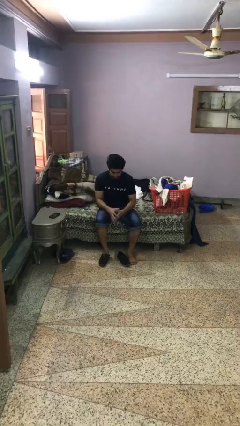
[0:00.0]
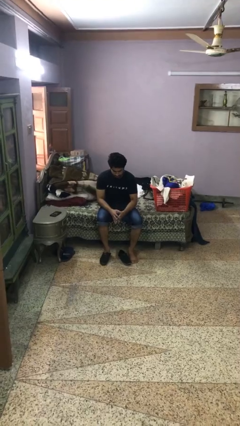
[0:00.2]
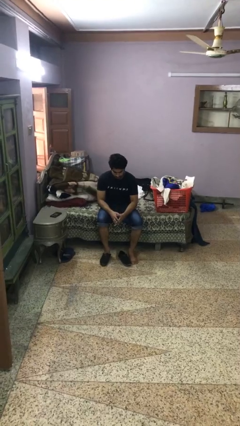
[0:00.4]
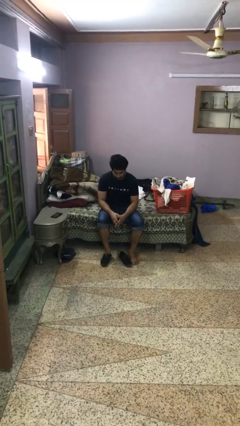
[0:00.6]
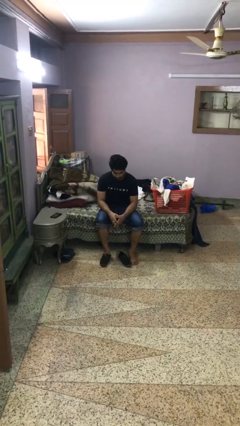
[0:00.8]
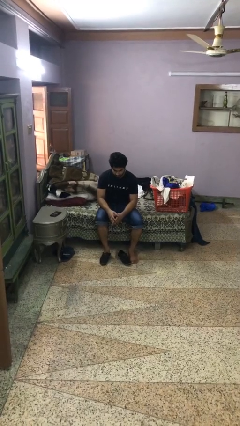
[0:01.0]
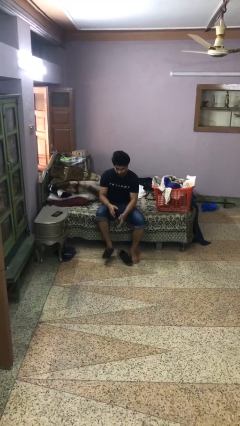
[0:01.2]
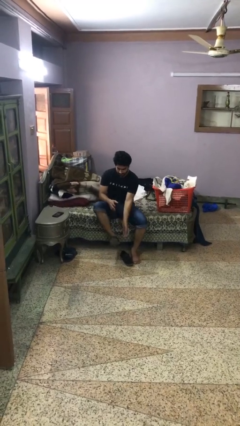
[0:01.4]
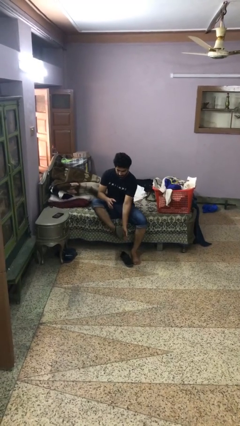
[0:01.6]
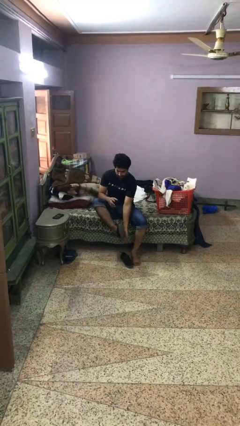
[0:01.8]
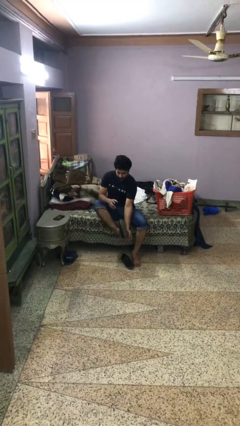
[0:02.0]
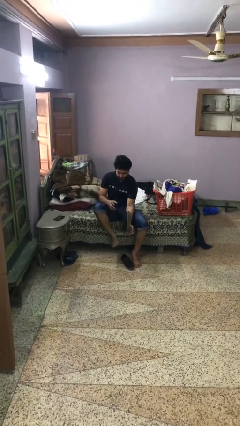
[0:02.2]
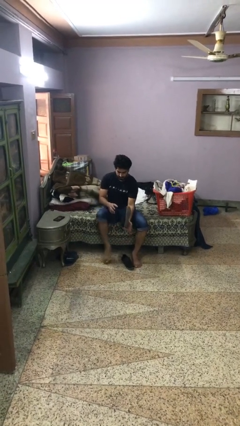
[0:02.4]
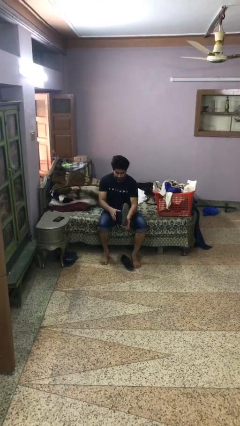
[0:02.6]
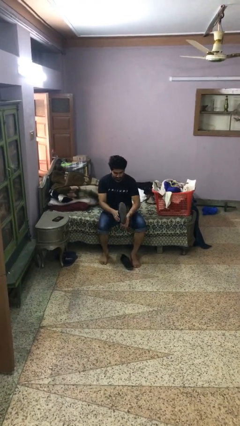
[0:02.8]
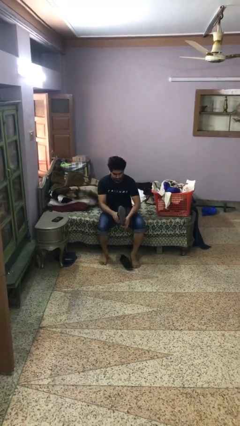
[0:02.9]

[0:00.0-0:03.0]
person takes off boots

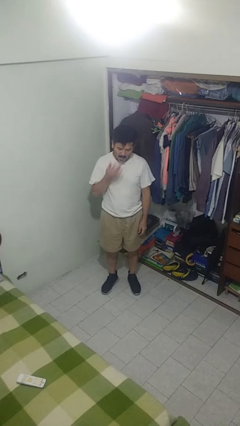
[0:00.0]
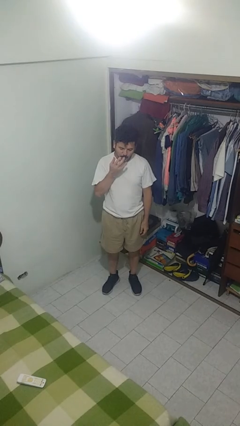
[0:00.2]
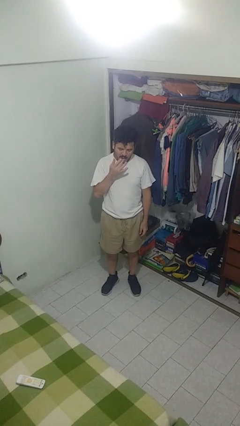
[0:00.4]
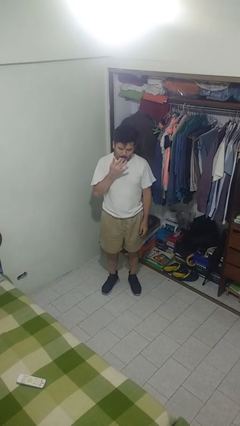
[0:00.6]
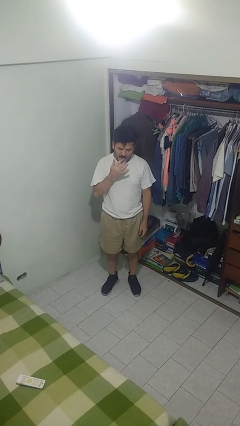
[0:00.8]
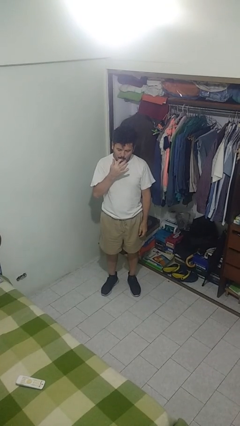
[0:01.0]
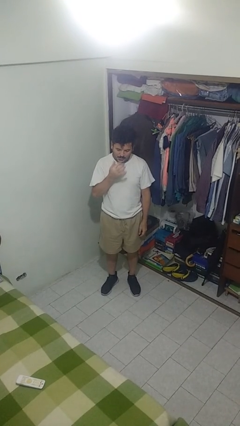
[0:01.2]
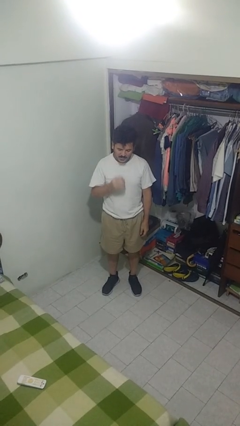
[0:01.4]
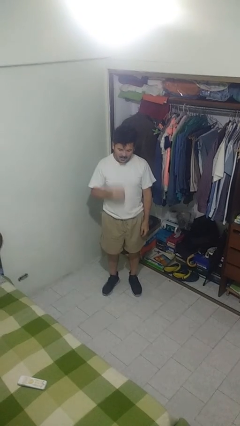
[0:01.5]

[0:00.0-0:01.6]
person licks fingers

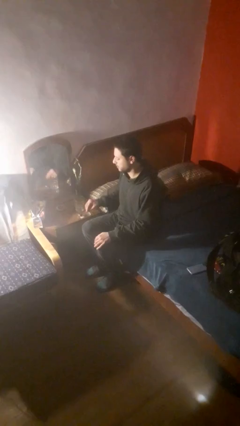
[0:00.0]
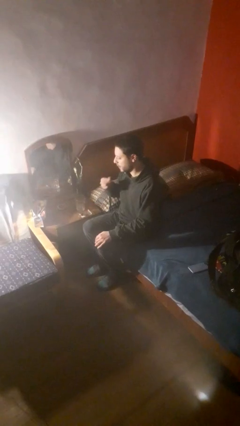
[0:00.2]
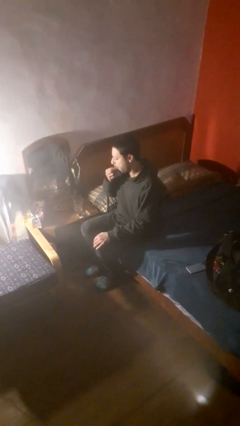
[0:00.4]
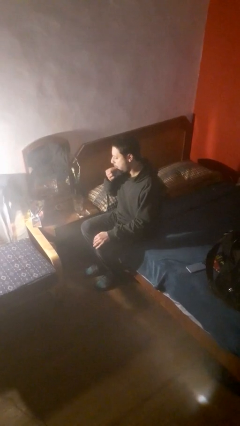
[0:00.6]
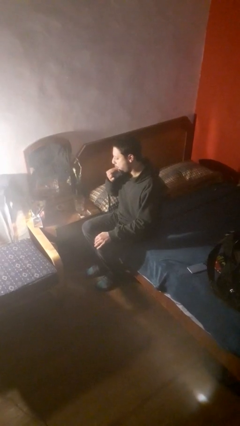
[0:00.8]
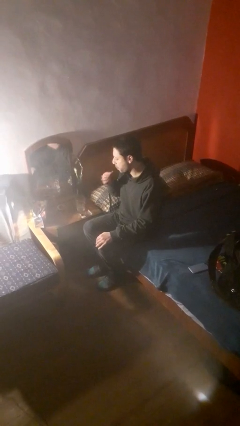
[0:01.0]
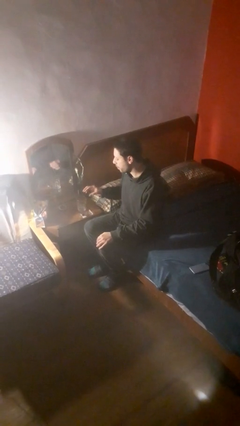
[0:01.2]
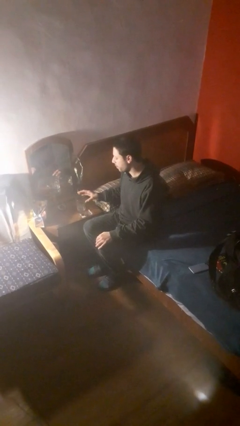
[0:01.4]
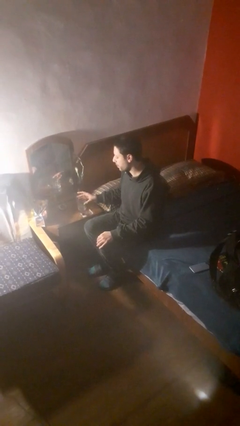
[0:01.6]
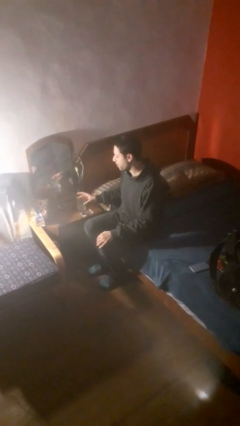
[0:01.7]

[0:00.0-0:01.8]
person takes medicine pills

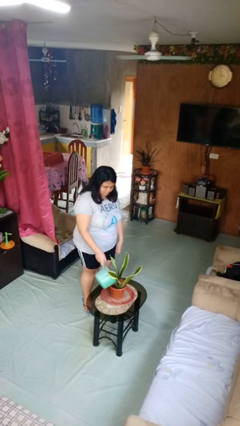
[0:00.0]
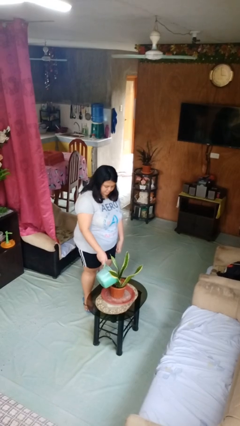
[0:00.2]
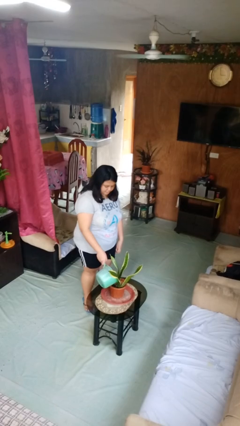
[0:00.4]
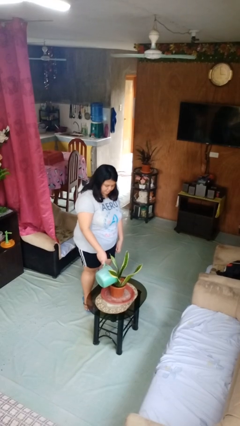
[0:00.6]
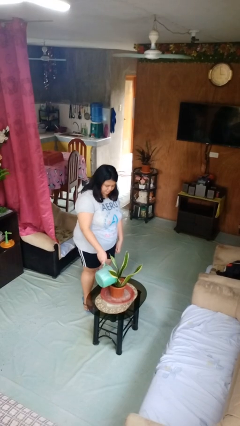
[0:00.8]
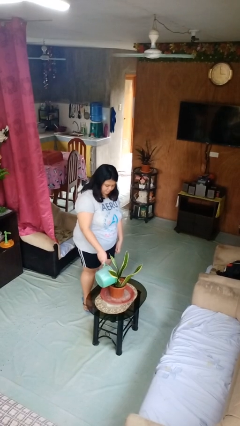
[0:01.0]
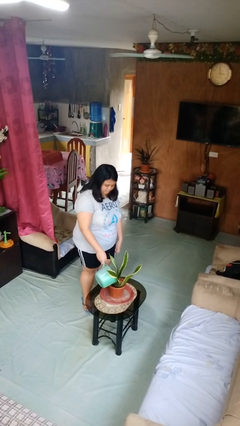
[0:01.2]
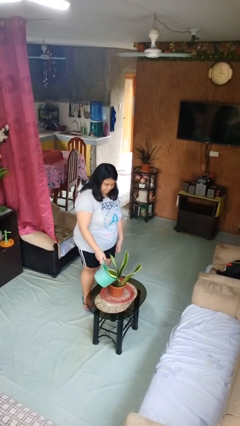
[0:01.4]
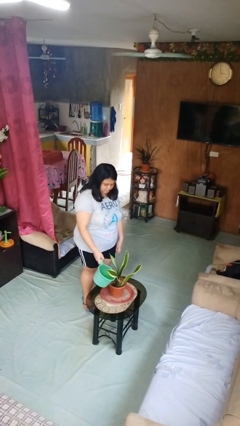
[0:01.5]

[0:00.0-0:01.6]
person waters houseplant

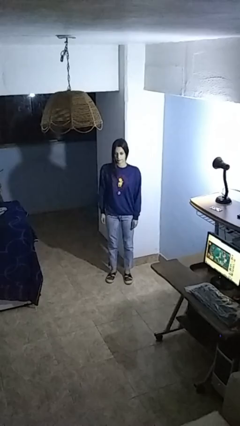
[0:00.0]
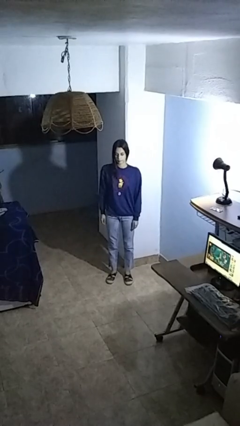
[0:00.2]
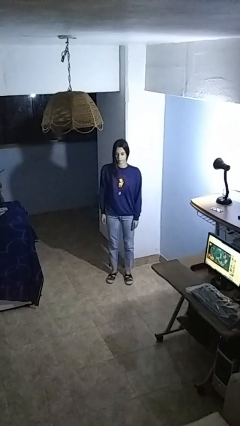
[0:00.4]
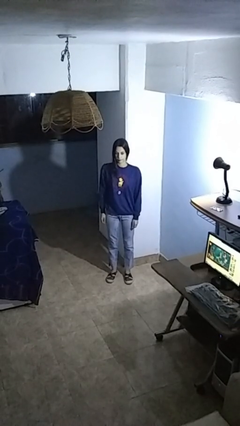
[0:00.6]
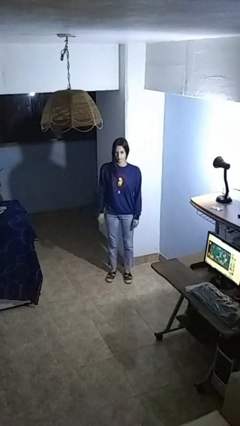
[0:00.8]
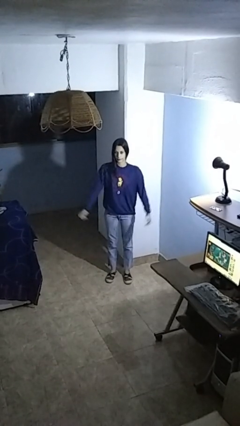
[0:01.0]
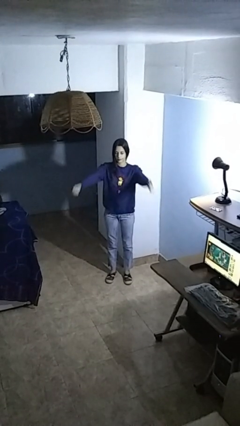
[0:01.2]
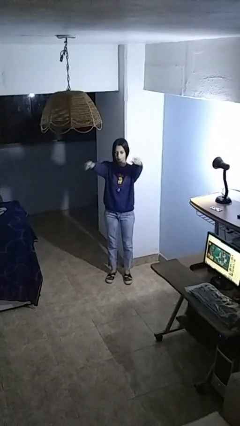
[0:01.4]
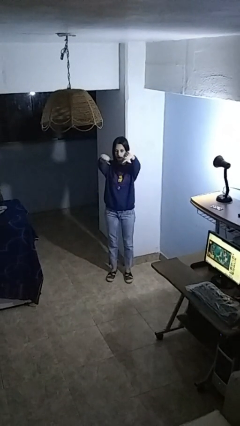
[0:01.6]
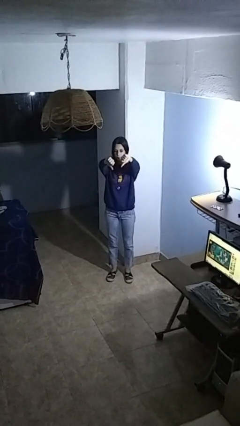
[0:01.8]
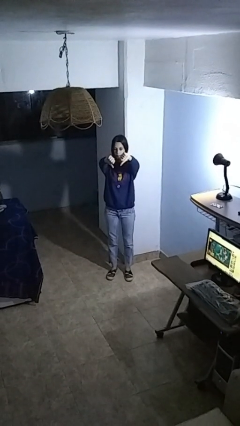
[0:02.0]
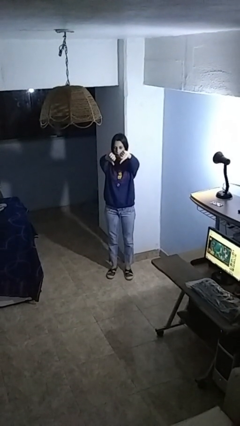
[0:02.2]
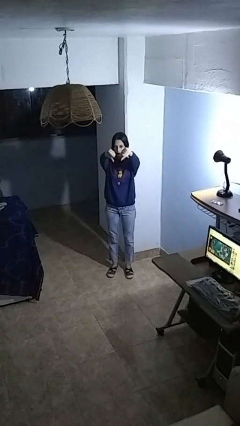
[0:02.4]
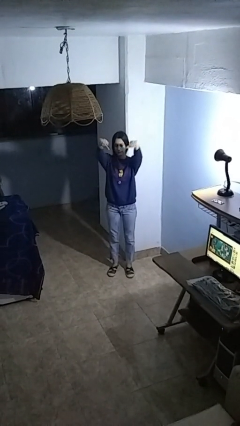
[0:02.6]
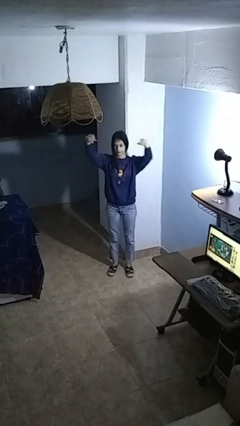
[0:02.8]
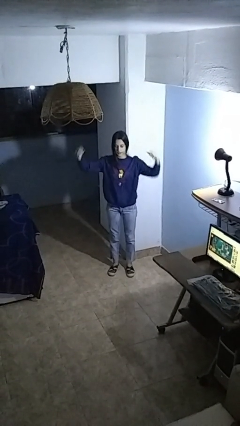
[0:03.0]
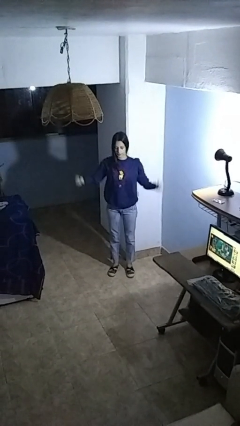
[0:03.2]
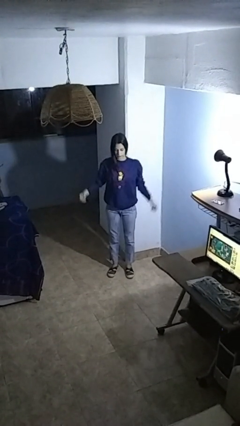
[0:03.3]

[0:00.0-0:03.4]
person gestures thumbs down

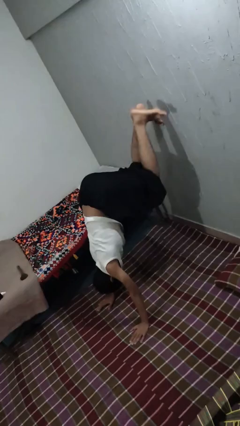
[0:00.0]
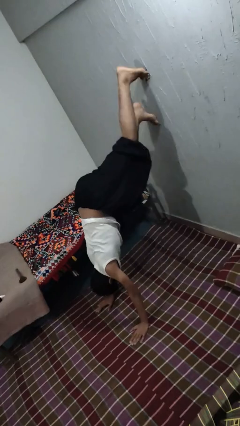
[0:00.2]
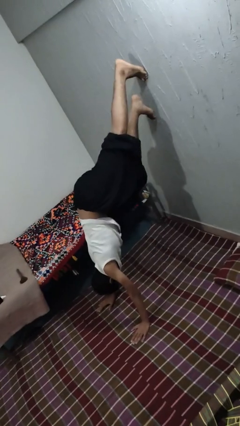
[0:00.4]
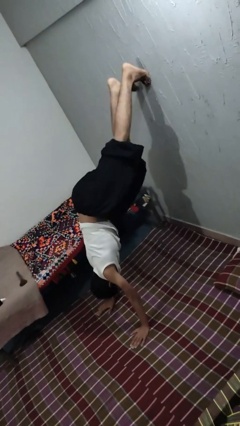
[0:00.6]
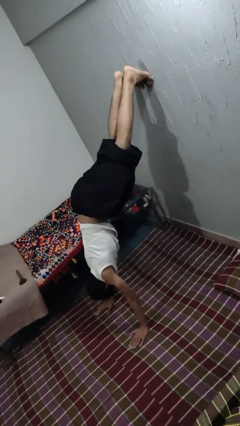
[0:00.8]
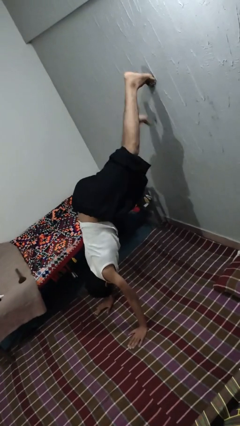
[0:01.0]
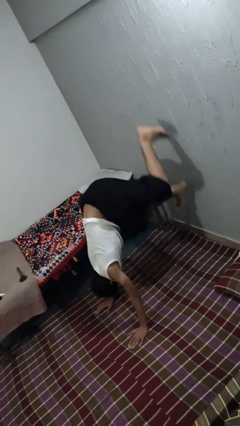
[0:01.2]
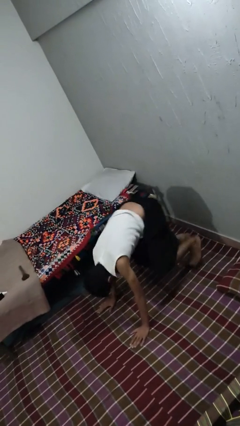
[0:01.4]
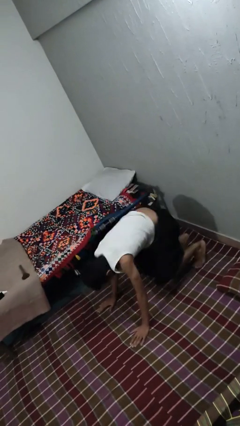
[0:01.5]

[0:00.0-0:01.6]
person handstand

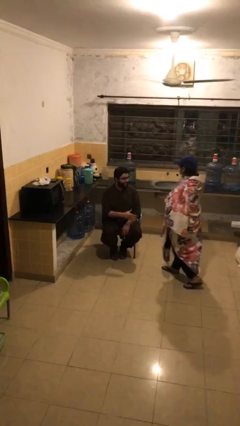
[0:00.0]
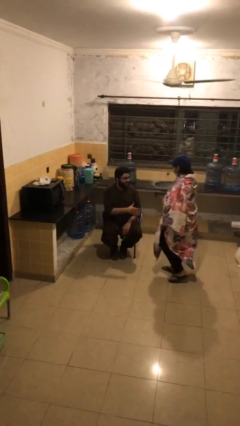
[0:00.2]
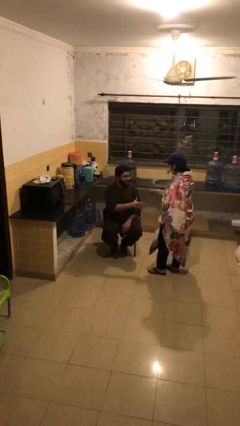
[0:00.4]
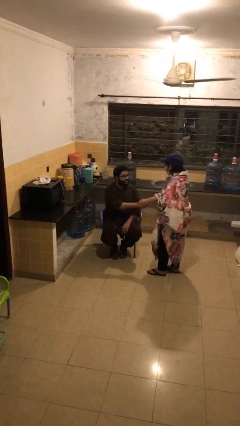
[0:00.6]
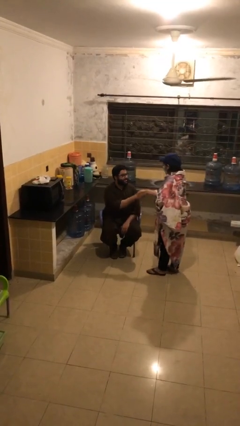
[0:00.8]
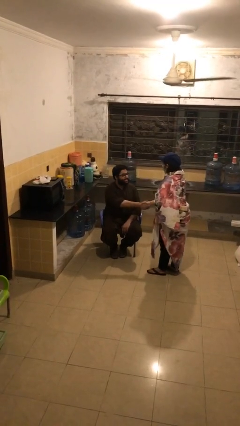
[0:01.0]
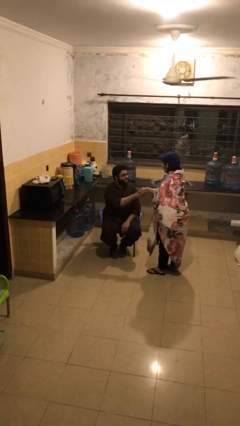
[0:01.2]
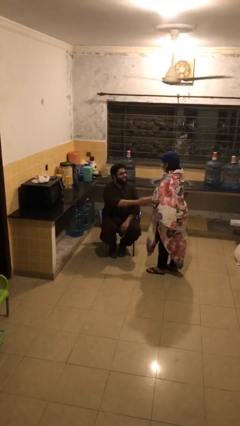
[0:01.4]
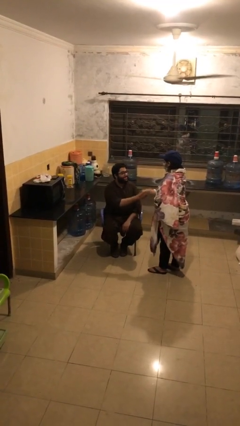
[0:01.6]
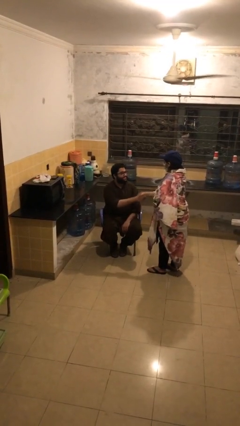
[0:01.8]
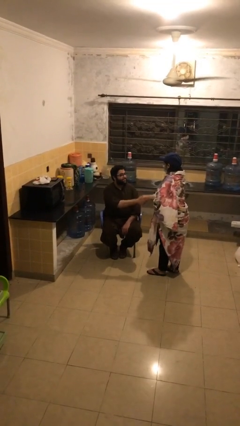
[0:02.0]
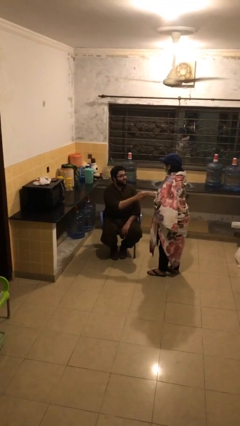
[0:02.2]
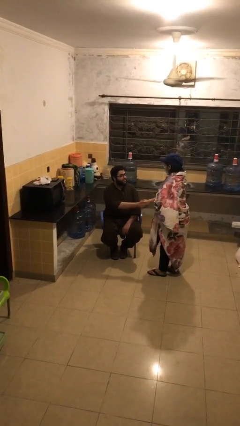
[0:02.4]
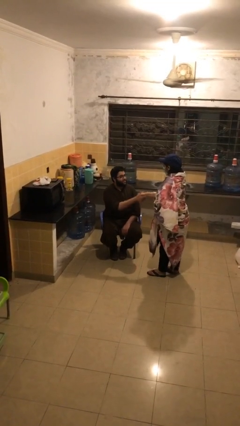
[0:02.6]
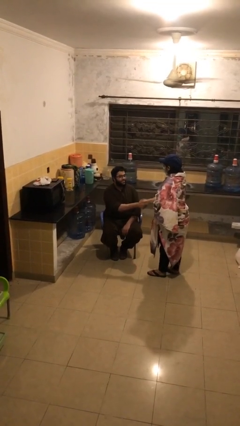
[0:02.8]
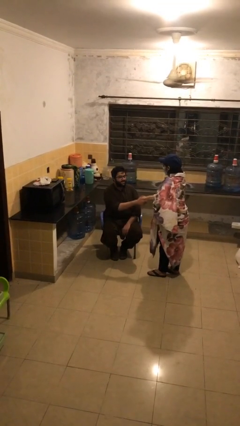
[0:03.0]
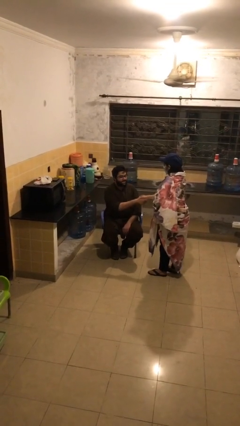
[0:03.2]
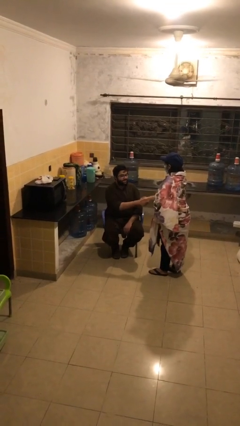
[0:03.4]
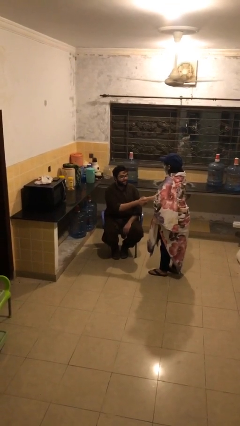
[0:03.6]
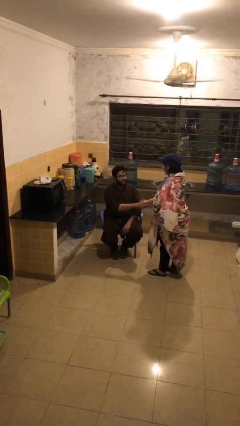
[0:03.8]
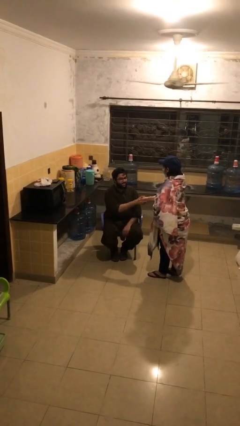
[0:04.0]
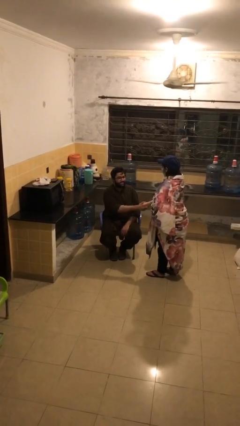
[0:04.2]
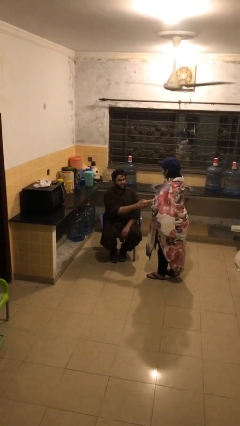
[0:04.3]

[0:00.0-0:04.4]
person shakes hand
